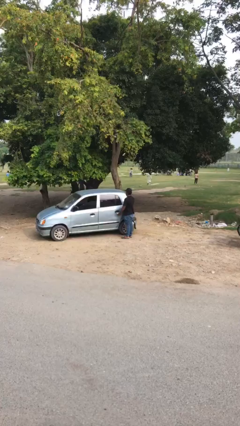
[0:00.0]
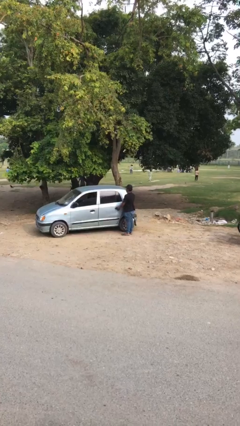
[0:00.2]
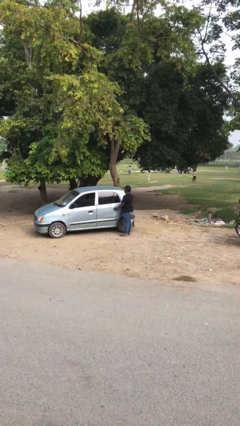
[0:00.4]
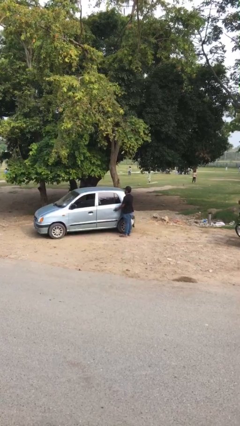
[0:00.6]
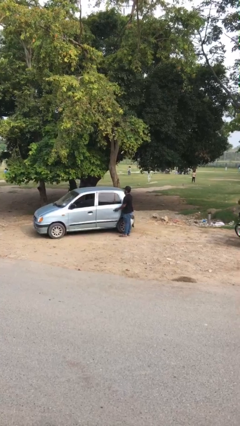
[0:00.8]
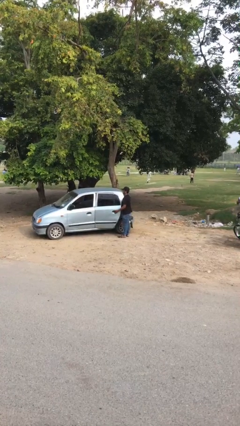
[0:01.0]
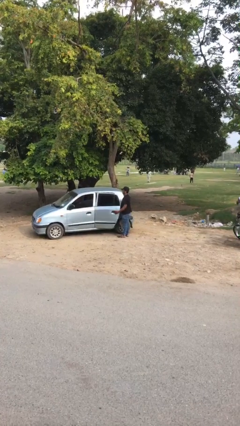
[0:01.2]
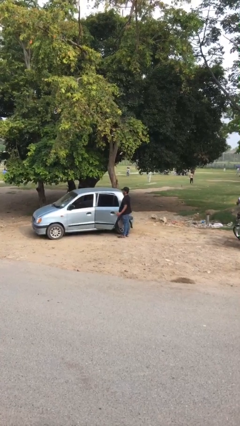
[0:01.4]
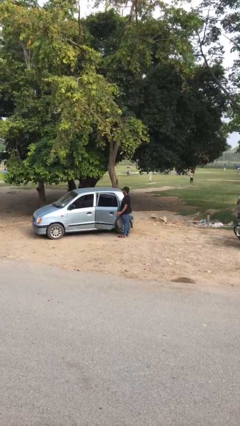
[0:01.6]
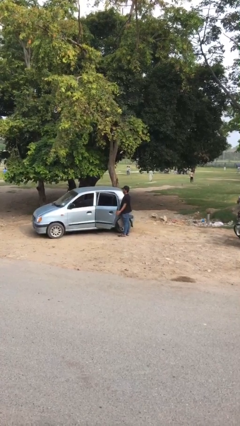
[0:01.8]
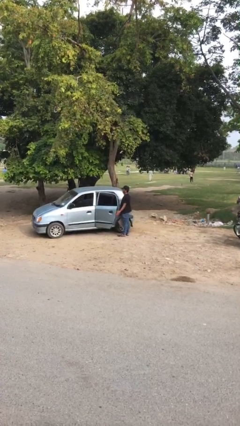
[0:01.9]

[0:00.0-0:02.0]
person opens car door

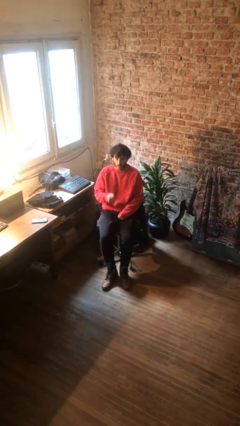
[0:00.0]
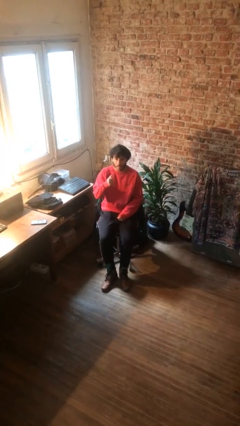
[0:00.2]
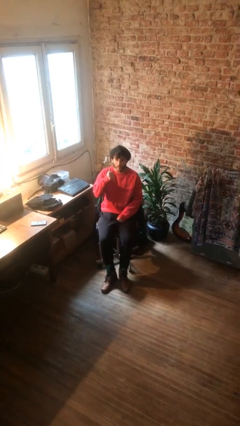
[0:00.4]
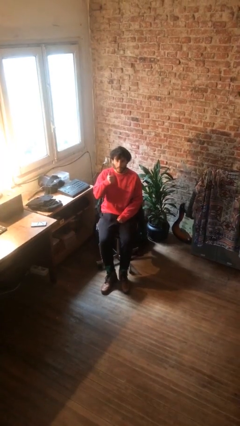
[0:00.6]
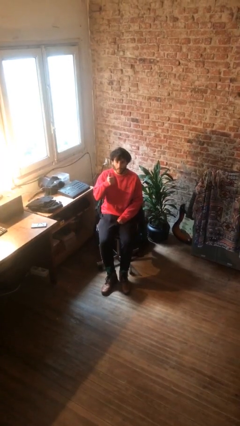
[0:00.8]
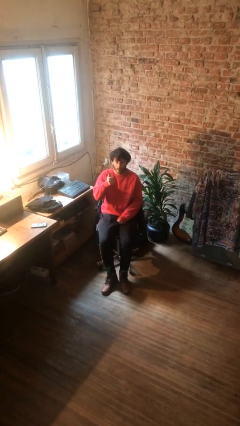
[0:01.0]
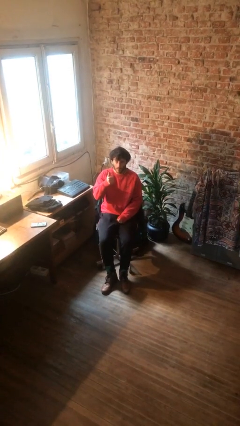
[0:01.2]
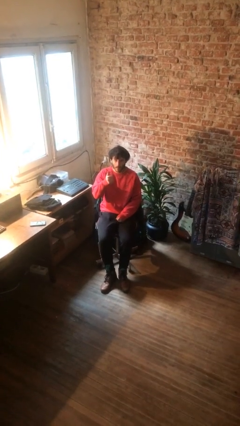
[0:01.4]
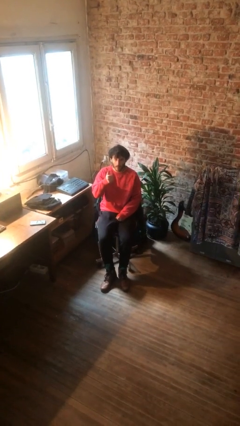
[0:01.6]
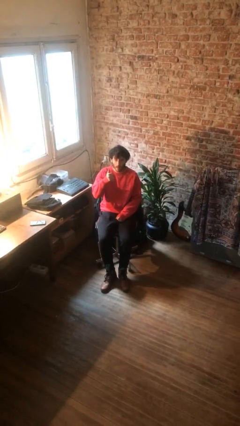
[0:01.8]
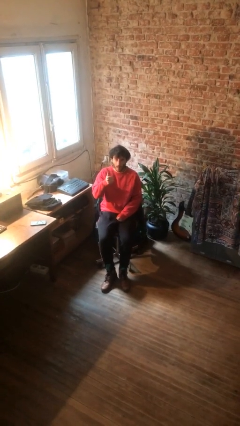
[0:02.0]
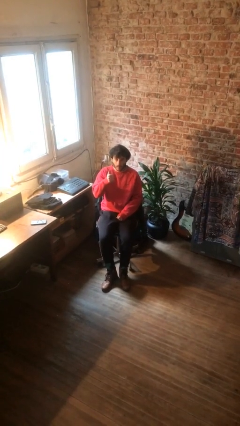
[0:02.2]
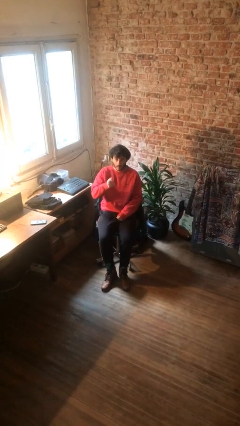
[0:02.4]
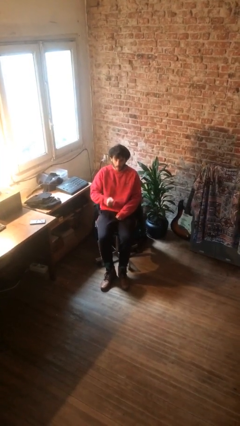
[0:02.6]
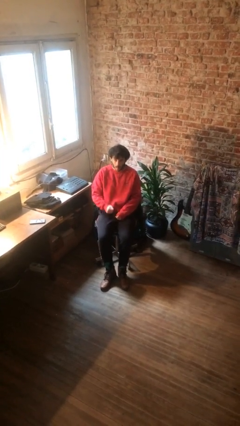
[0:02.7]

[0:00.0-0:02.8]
person gestures thumbs up

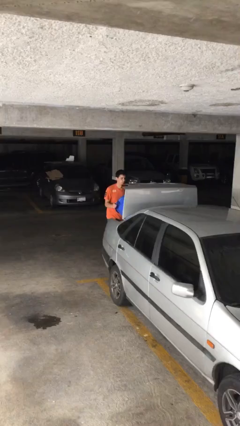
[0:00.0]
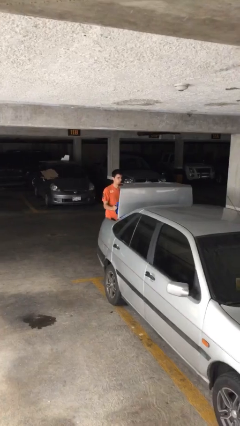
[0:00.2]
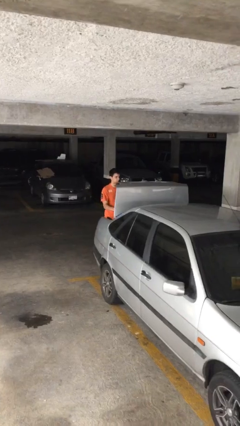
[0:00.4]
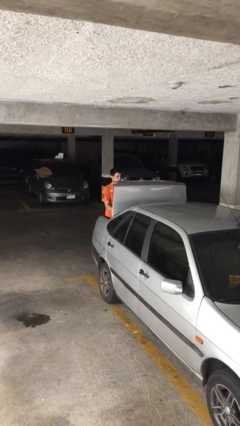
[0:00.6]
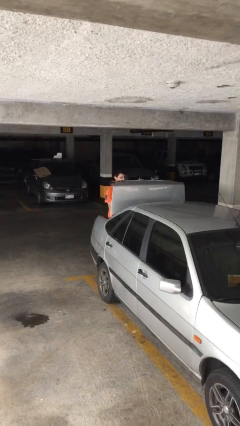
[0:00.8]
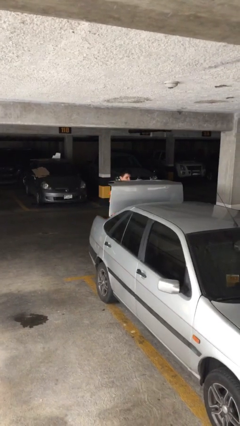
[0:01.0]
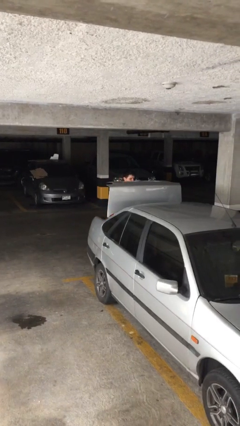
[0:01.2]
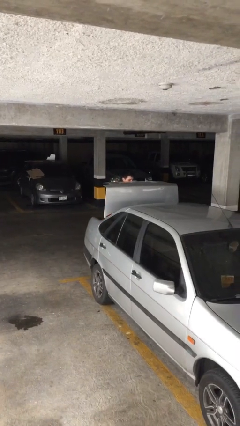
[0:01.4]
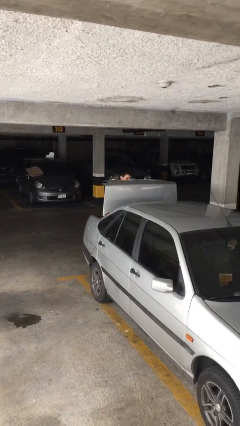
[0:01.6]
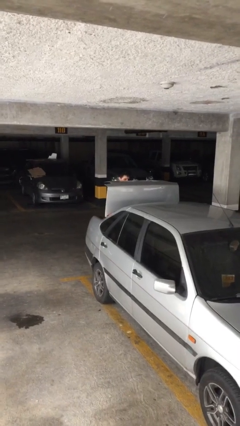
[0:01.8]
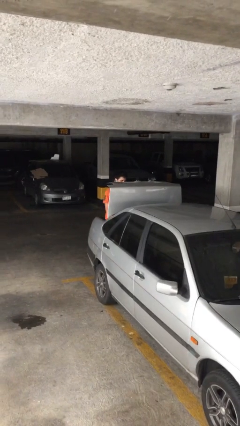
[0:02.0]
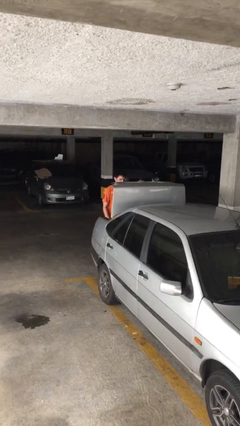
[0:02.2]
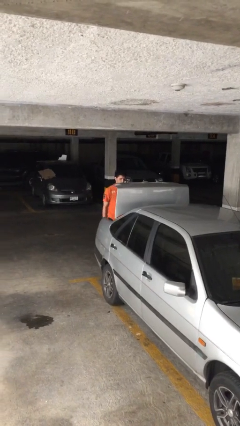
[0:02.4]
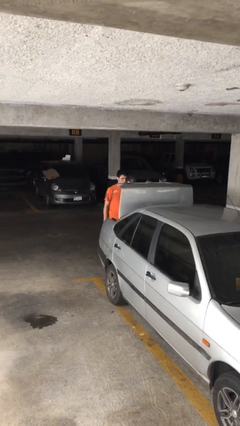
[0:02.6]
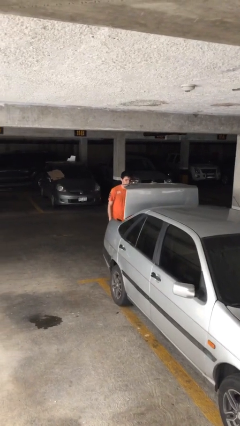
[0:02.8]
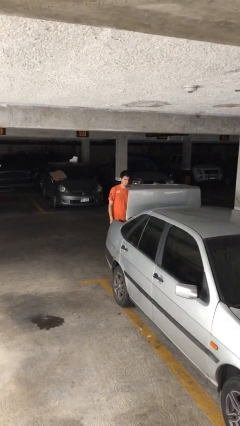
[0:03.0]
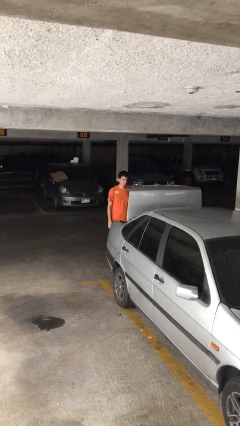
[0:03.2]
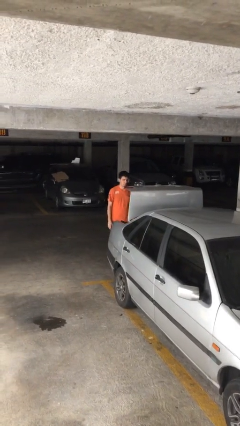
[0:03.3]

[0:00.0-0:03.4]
person loads car

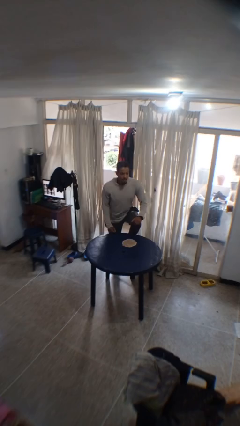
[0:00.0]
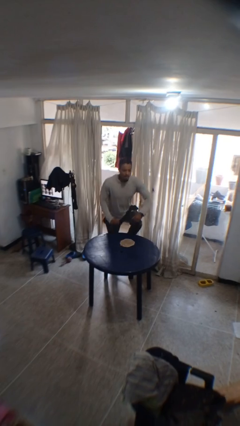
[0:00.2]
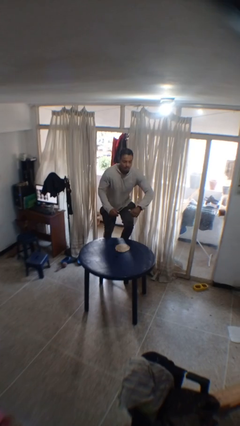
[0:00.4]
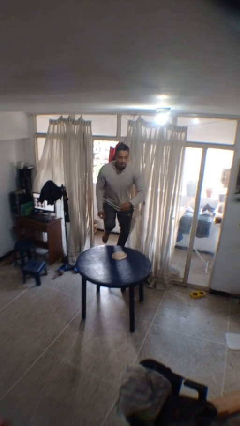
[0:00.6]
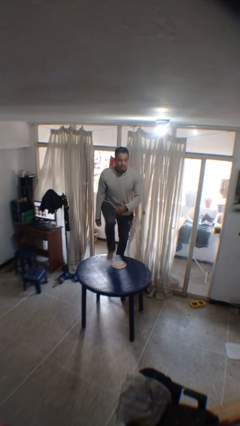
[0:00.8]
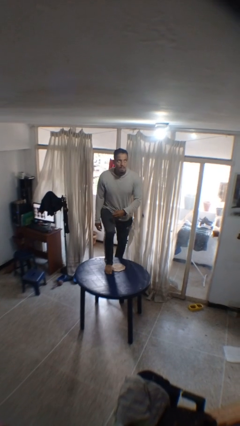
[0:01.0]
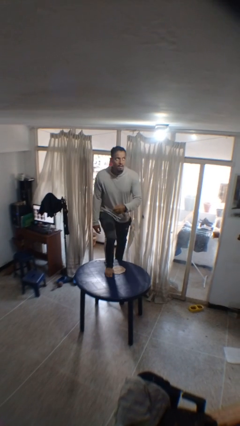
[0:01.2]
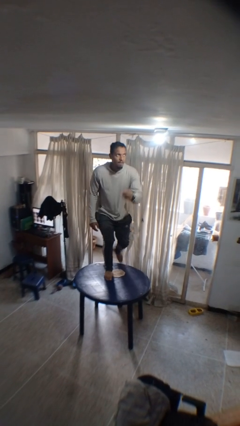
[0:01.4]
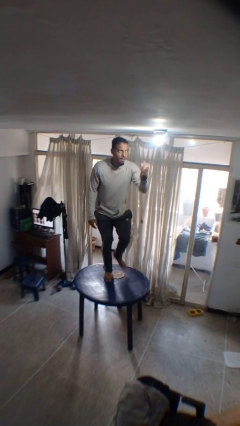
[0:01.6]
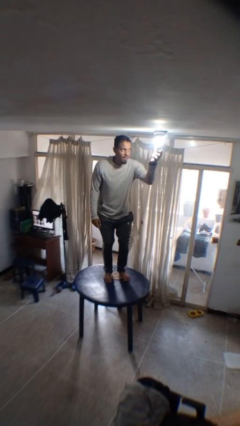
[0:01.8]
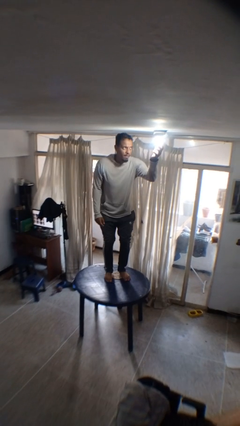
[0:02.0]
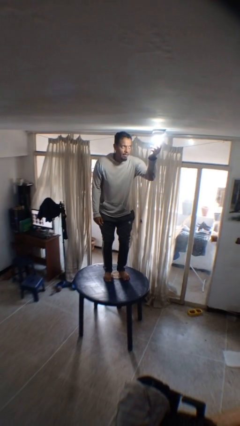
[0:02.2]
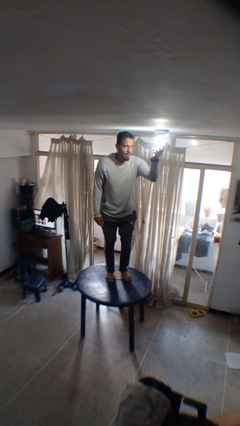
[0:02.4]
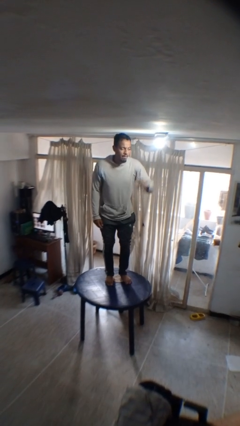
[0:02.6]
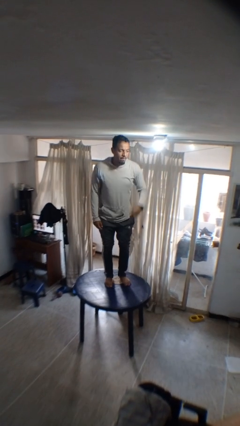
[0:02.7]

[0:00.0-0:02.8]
person climbs on table

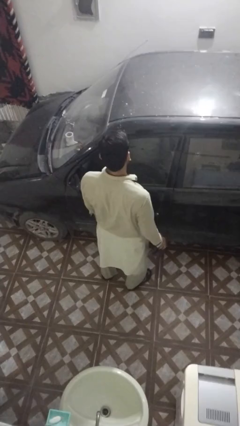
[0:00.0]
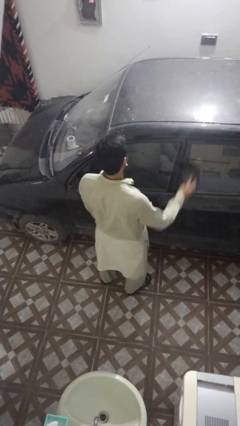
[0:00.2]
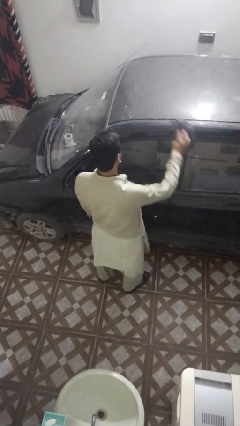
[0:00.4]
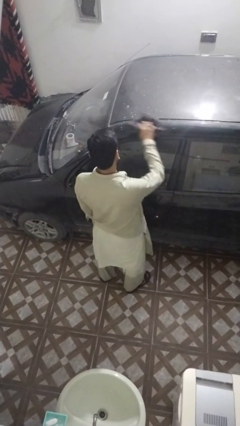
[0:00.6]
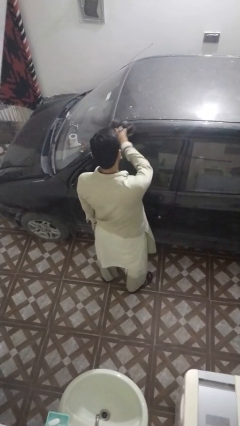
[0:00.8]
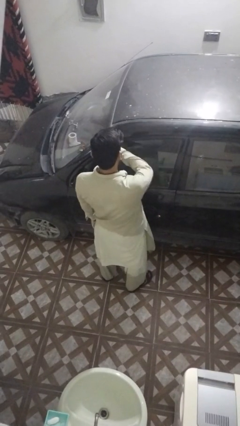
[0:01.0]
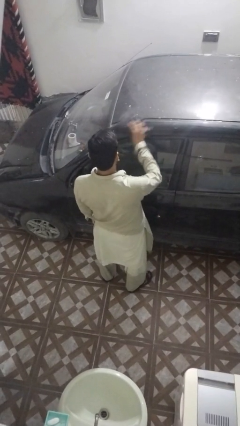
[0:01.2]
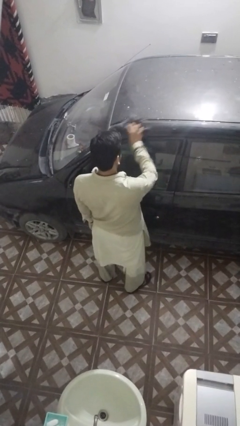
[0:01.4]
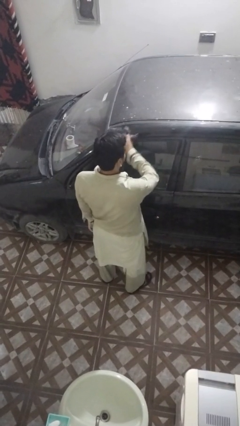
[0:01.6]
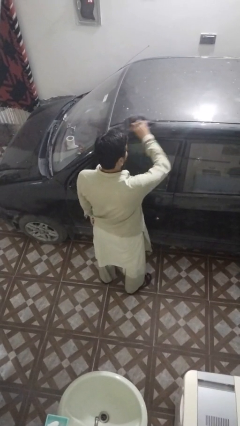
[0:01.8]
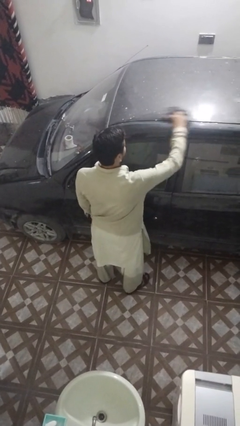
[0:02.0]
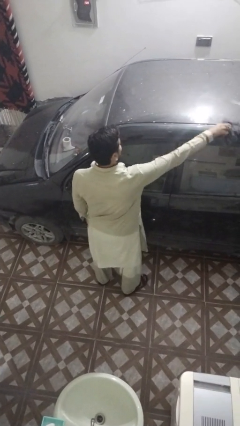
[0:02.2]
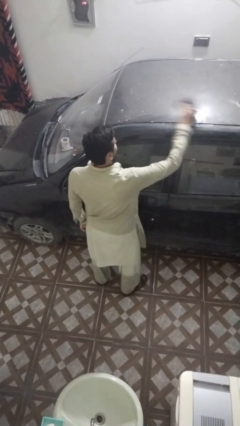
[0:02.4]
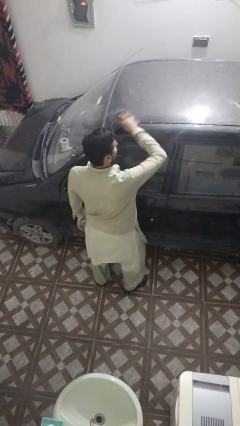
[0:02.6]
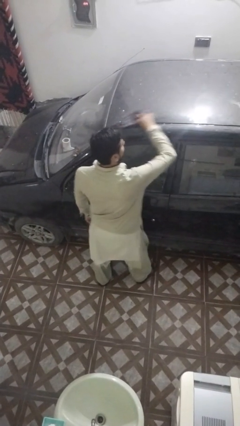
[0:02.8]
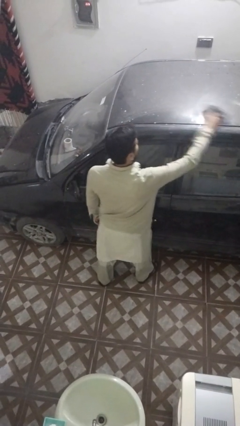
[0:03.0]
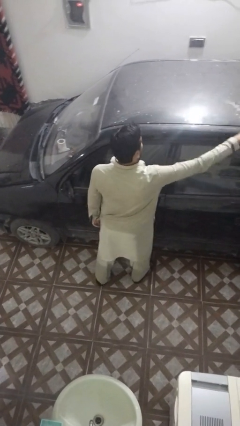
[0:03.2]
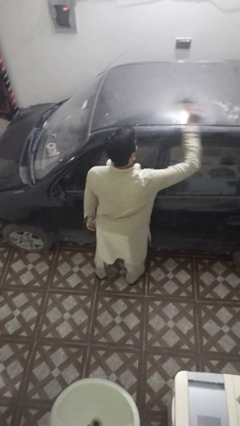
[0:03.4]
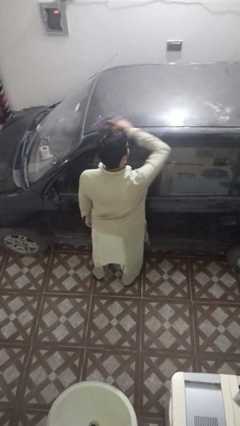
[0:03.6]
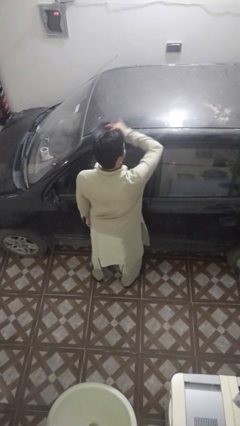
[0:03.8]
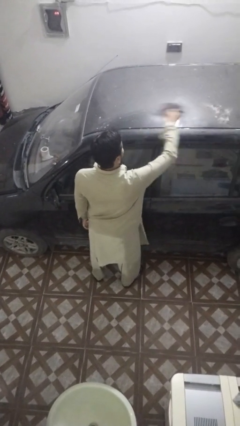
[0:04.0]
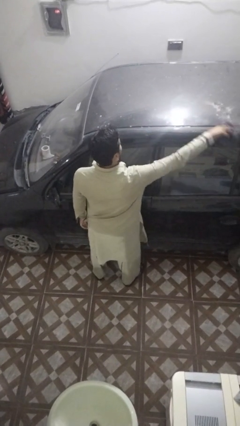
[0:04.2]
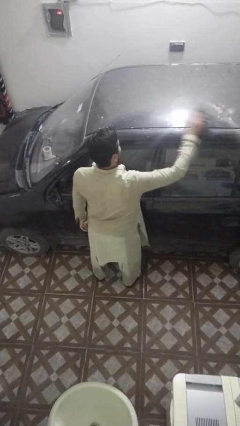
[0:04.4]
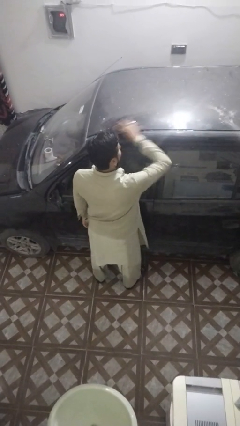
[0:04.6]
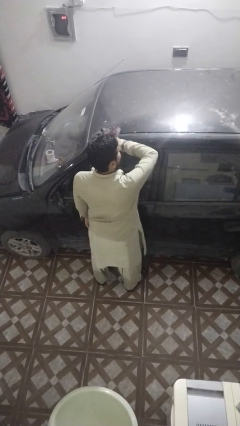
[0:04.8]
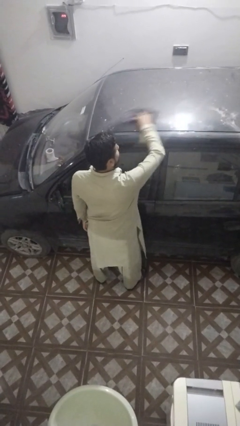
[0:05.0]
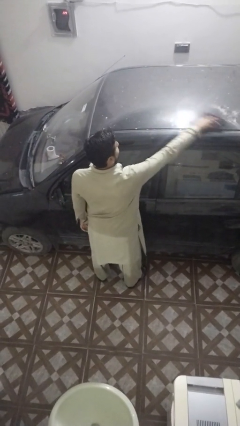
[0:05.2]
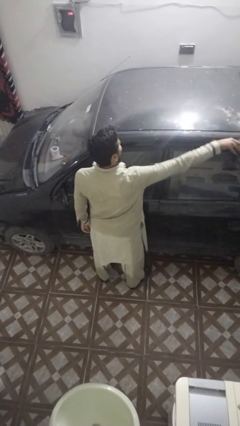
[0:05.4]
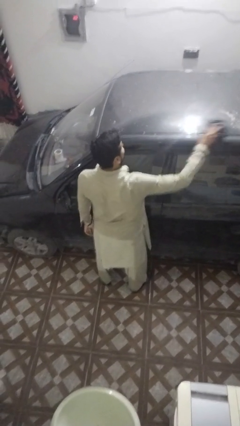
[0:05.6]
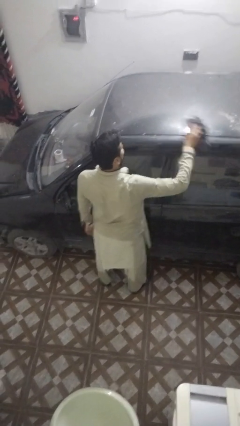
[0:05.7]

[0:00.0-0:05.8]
person polishes car with rag

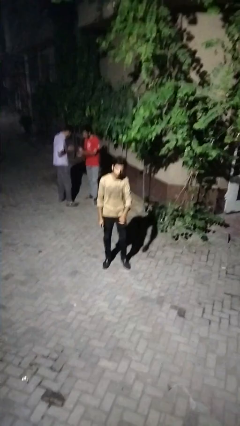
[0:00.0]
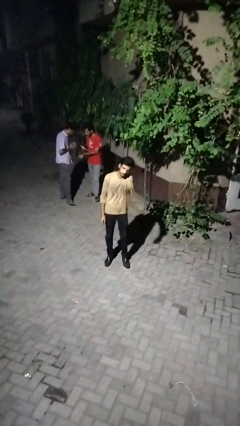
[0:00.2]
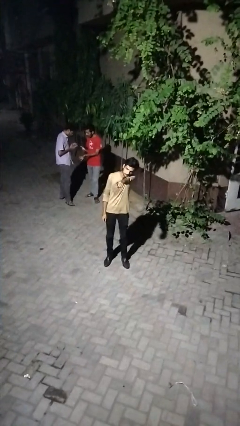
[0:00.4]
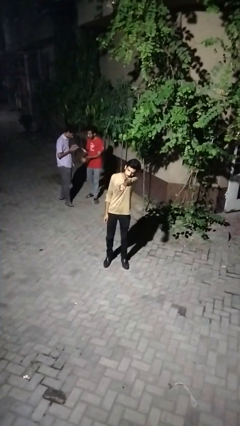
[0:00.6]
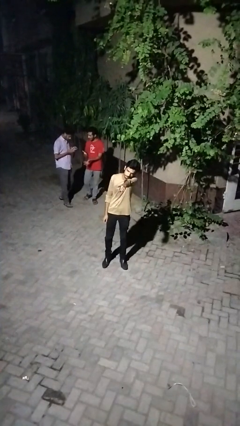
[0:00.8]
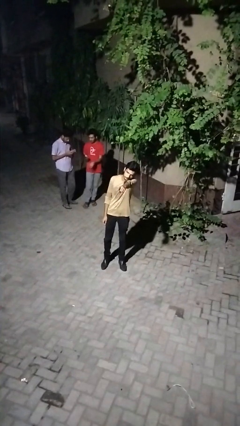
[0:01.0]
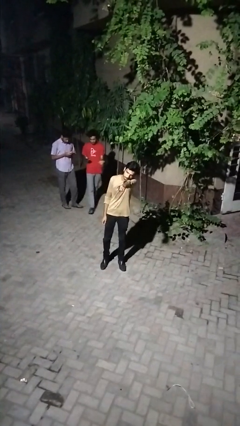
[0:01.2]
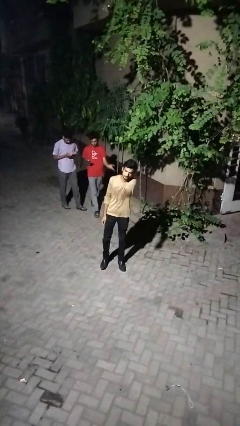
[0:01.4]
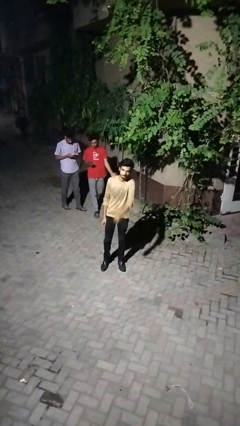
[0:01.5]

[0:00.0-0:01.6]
person points at person
